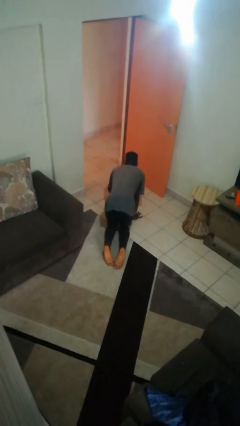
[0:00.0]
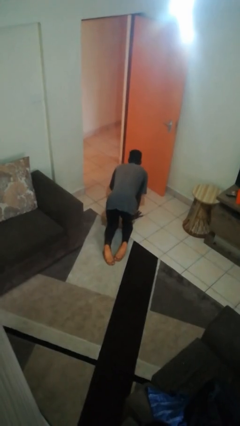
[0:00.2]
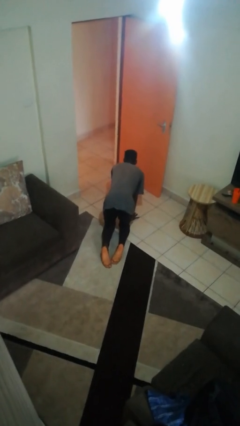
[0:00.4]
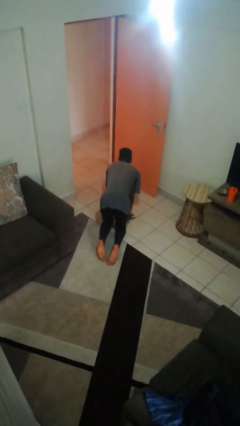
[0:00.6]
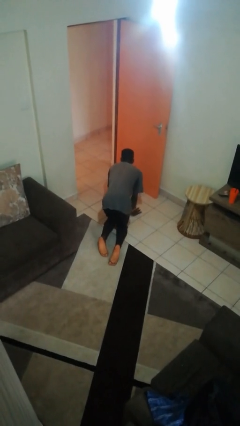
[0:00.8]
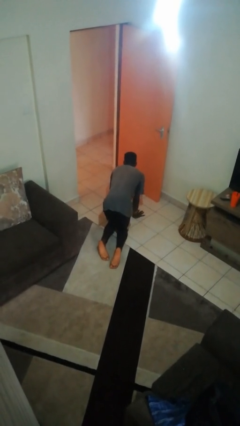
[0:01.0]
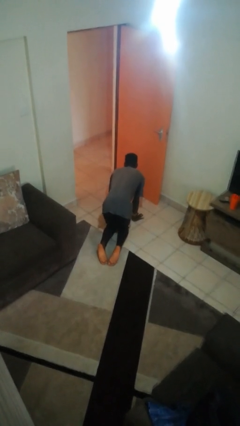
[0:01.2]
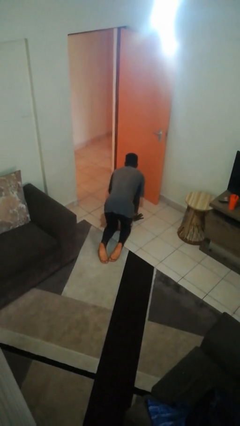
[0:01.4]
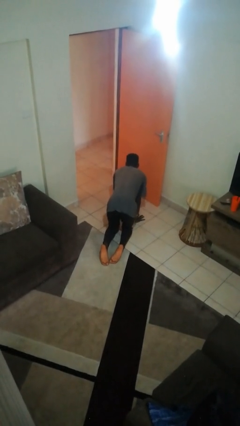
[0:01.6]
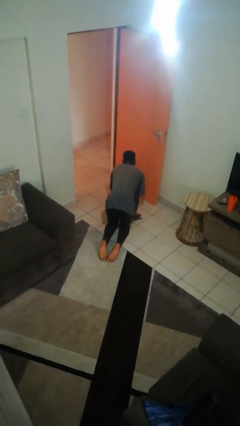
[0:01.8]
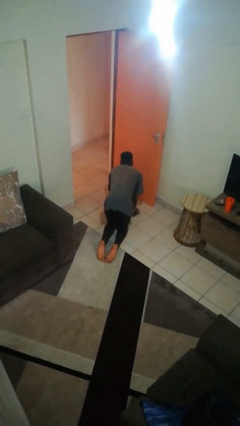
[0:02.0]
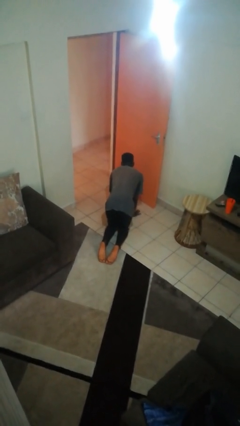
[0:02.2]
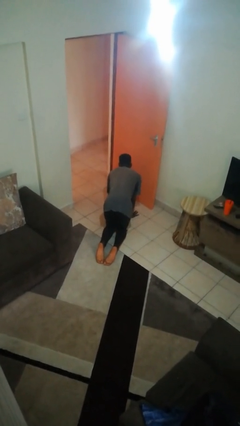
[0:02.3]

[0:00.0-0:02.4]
person crawls

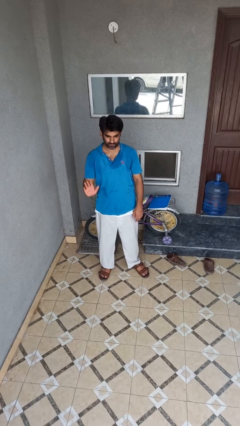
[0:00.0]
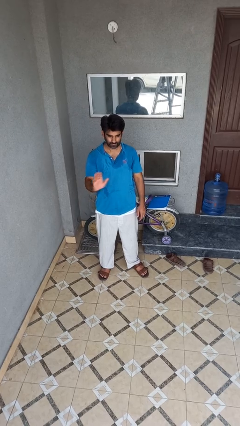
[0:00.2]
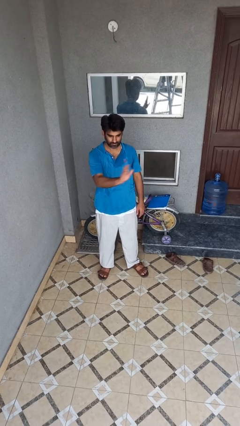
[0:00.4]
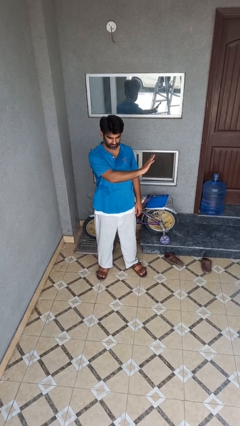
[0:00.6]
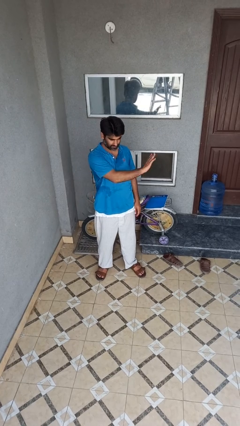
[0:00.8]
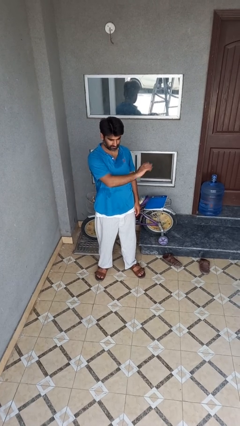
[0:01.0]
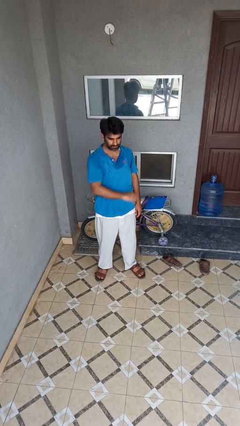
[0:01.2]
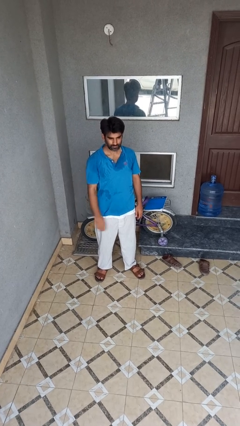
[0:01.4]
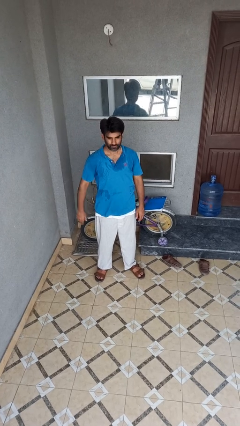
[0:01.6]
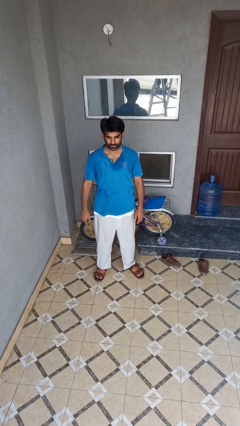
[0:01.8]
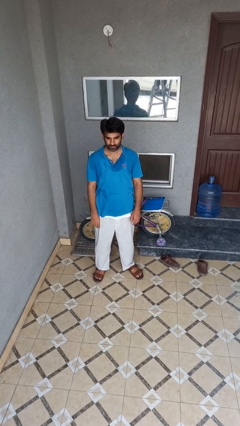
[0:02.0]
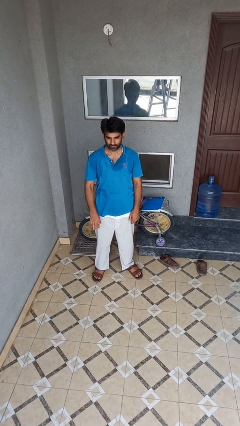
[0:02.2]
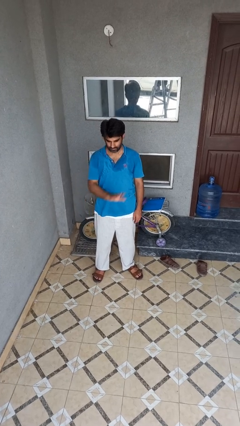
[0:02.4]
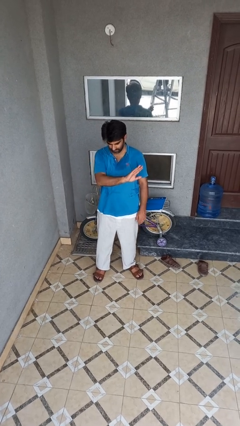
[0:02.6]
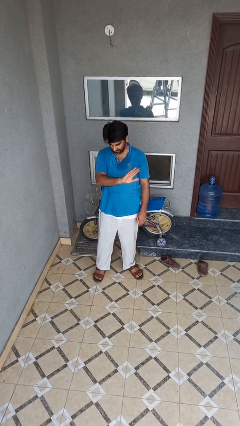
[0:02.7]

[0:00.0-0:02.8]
person gestures swipe left

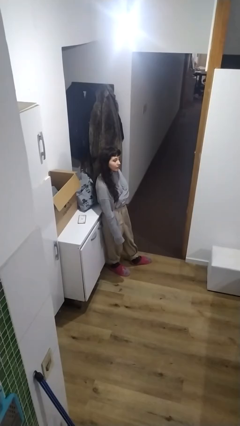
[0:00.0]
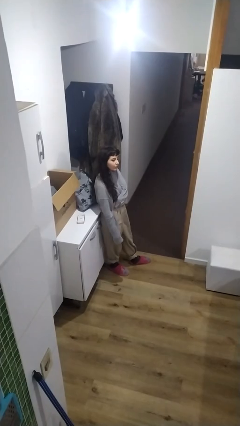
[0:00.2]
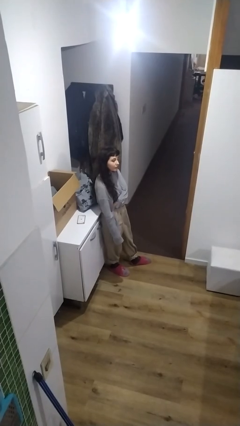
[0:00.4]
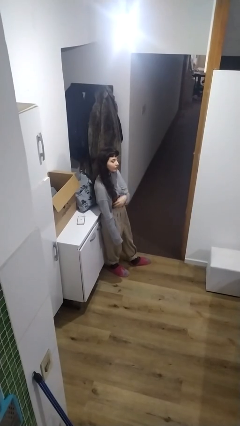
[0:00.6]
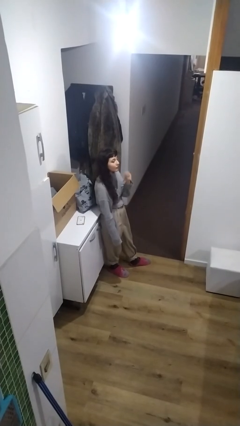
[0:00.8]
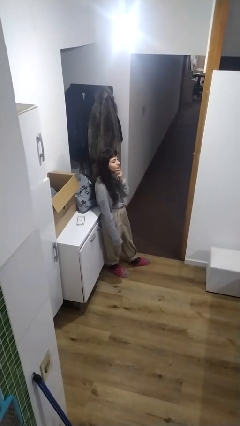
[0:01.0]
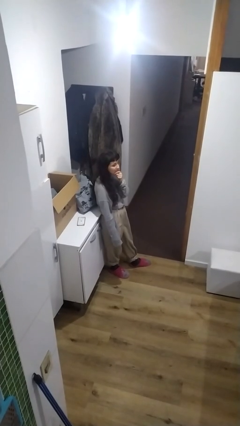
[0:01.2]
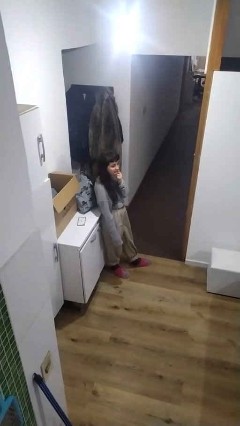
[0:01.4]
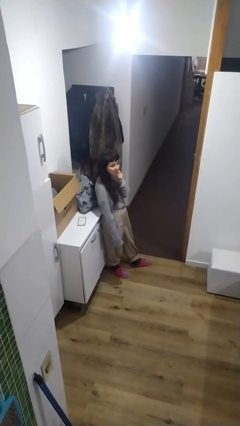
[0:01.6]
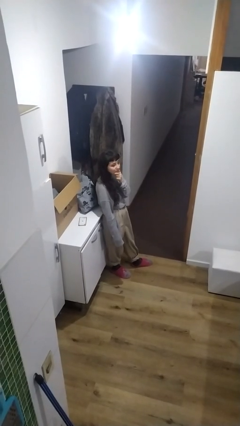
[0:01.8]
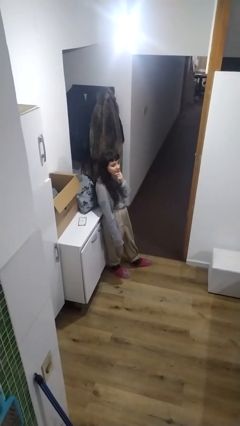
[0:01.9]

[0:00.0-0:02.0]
person strokes chin

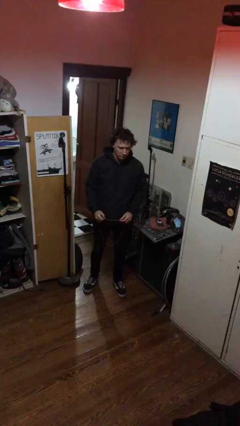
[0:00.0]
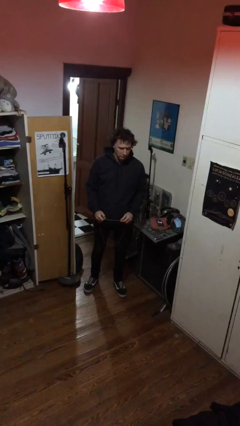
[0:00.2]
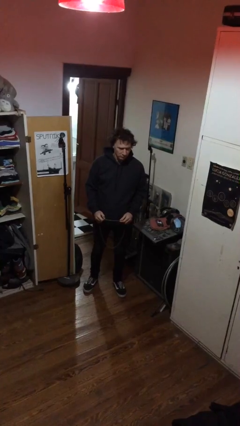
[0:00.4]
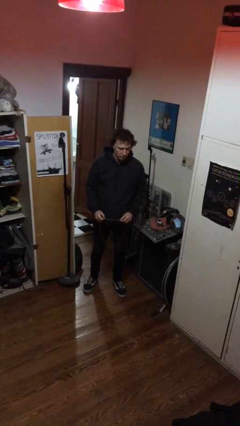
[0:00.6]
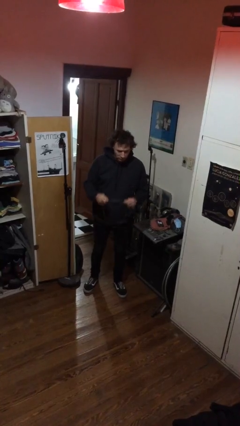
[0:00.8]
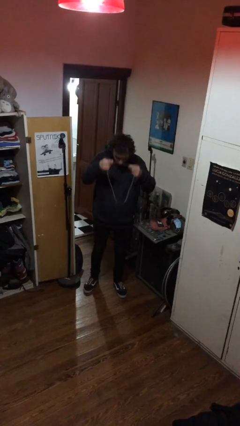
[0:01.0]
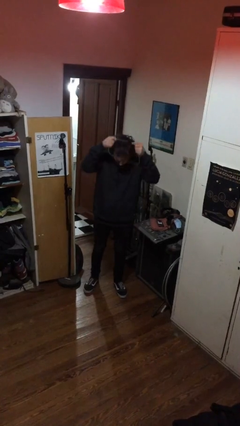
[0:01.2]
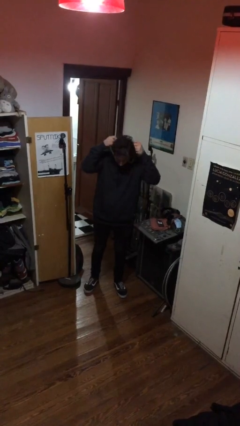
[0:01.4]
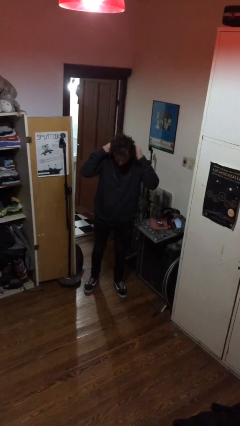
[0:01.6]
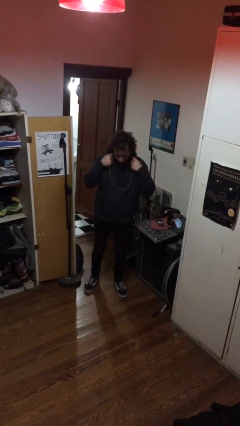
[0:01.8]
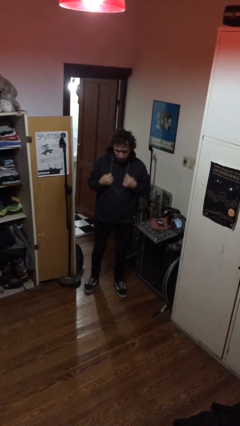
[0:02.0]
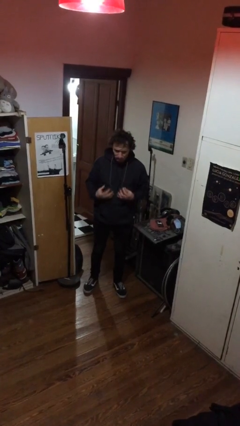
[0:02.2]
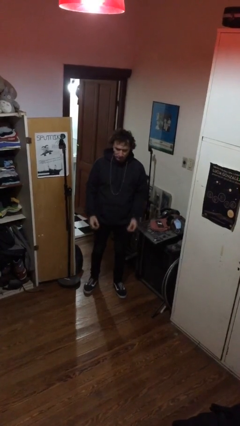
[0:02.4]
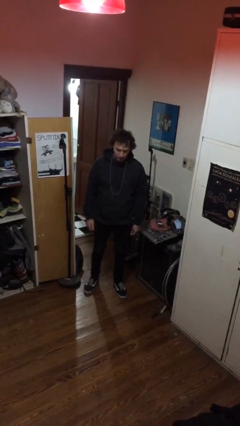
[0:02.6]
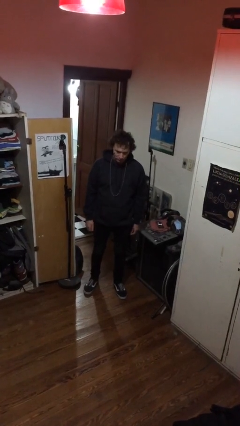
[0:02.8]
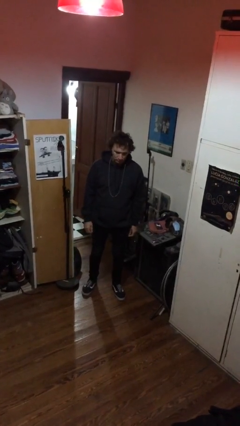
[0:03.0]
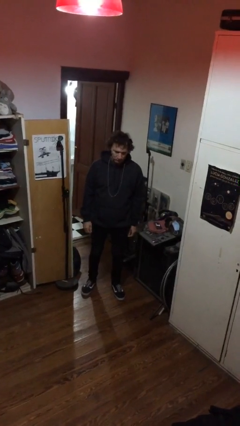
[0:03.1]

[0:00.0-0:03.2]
person puts on necklace

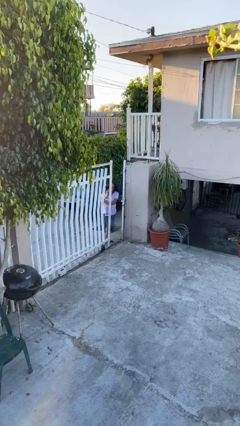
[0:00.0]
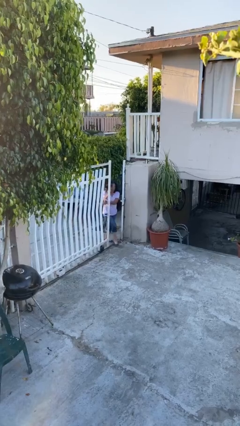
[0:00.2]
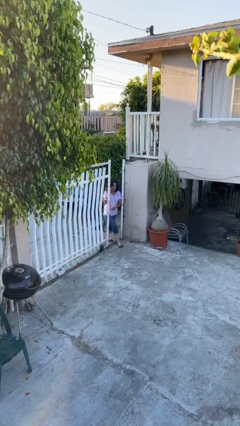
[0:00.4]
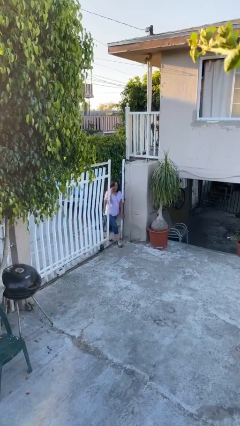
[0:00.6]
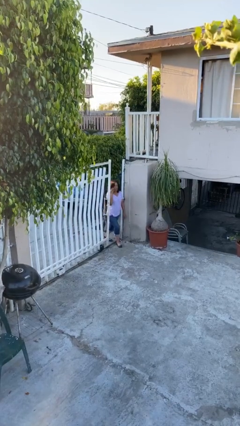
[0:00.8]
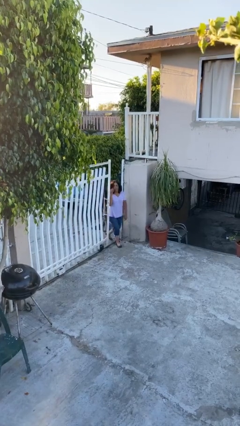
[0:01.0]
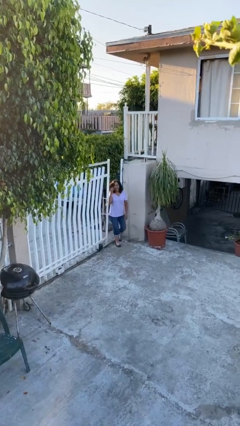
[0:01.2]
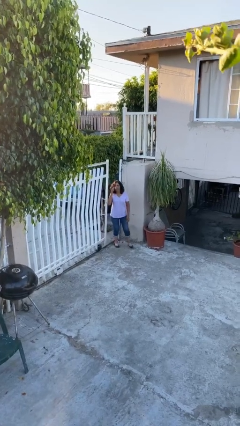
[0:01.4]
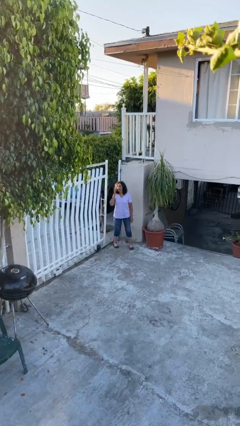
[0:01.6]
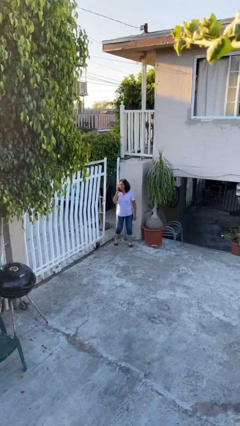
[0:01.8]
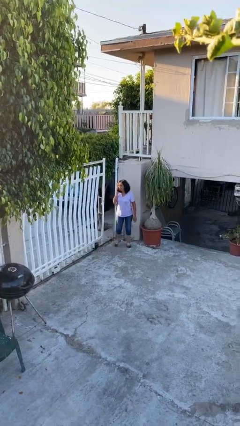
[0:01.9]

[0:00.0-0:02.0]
person enters scene through structure

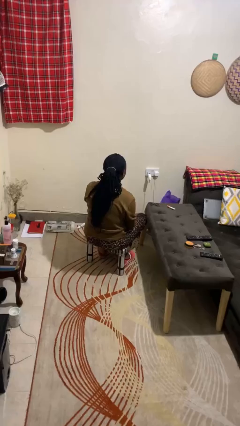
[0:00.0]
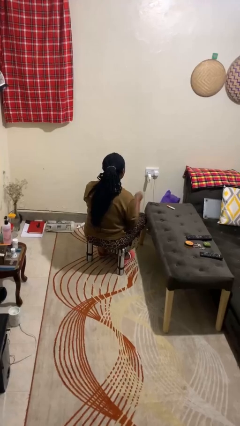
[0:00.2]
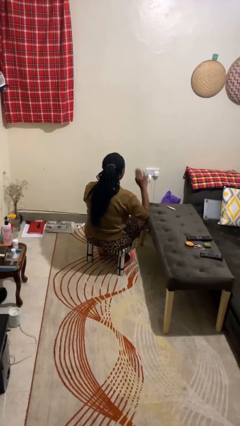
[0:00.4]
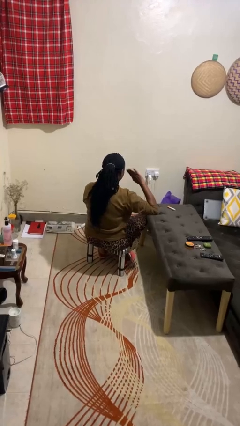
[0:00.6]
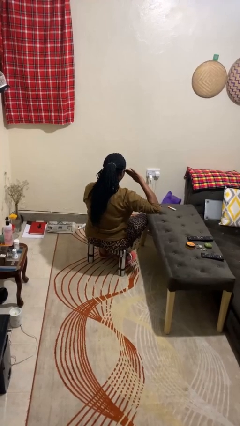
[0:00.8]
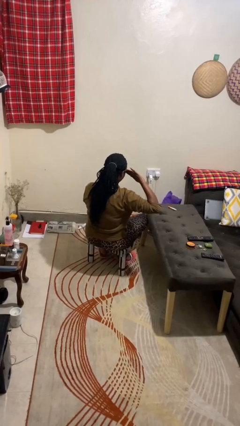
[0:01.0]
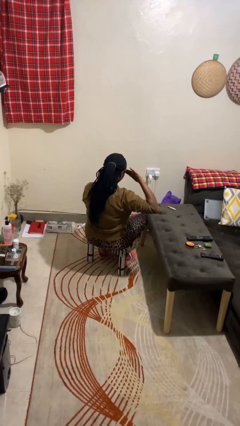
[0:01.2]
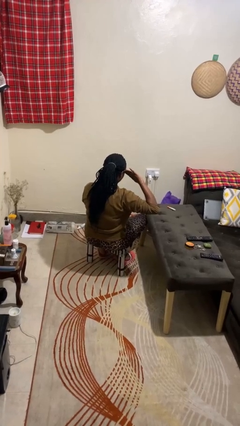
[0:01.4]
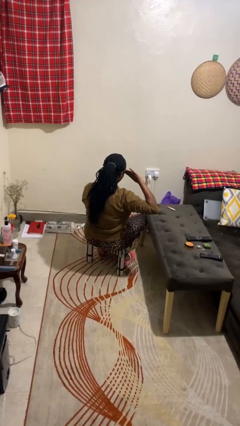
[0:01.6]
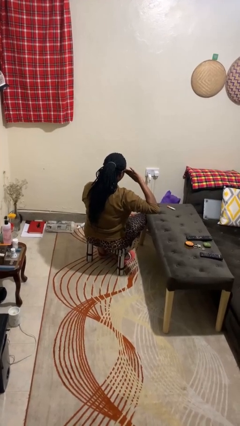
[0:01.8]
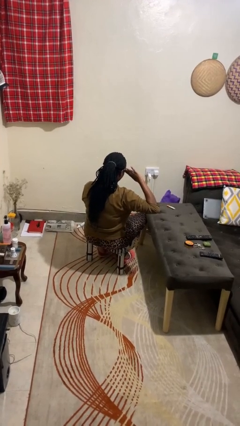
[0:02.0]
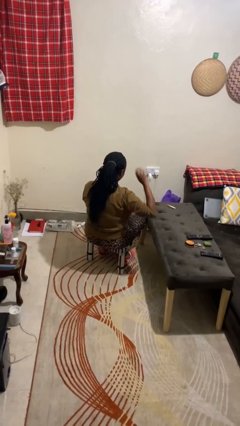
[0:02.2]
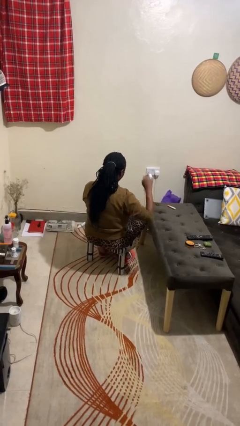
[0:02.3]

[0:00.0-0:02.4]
person salutes

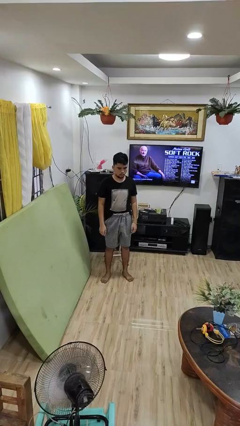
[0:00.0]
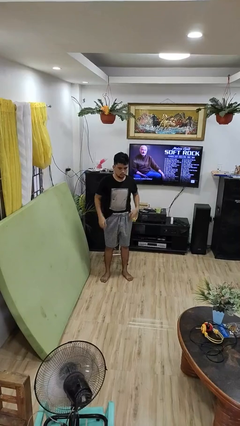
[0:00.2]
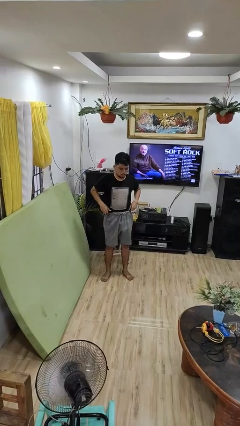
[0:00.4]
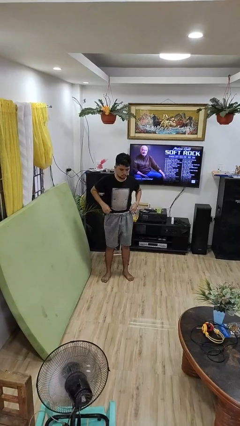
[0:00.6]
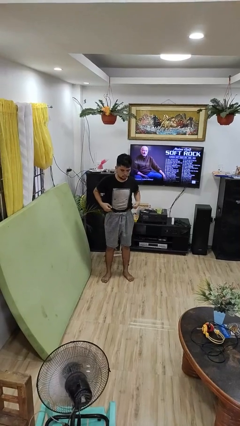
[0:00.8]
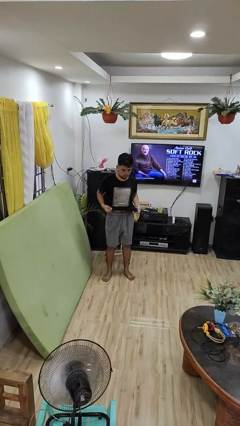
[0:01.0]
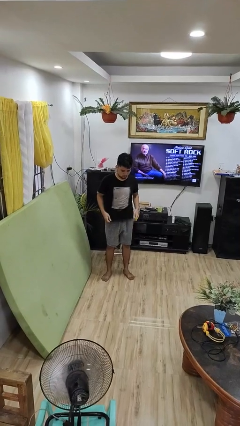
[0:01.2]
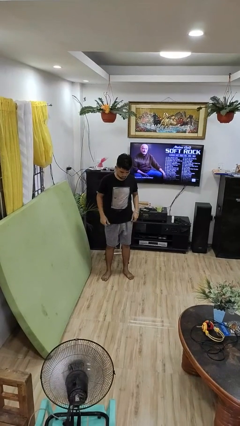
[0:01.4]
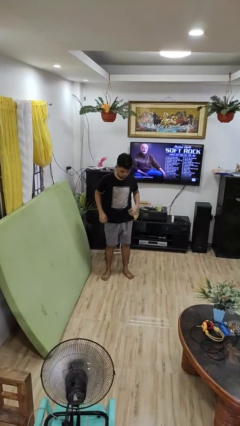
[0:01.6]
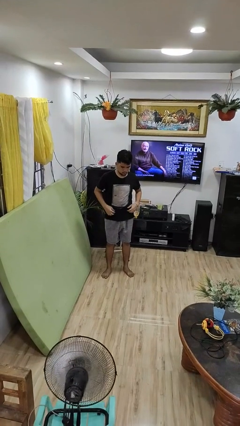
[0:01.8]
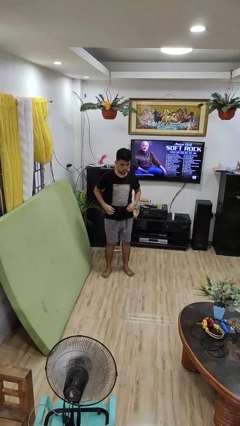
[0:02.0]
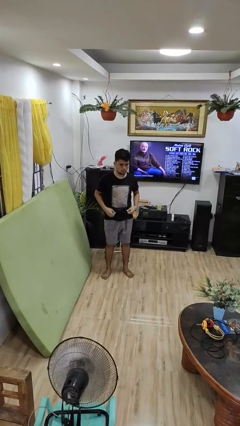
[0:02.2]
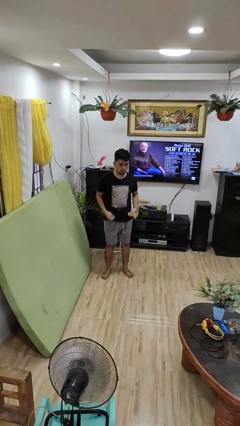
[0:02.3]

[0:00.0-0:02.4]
person untucks shirt
